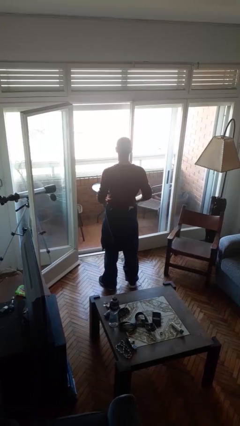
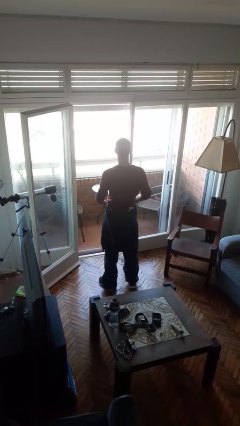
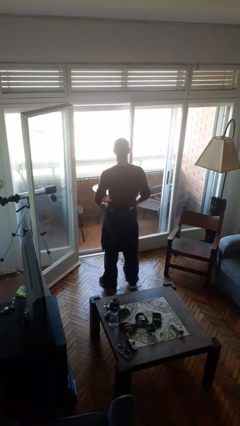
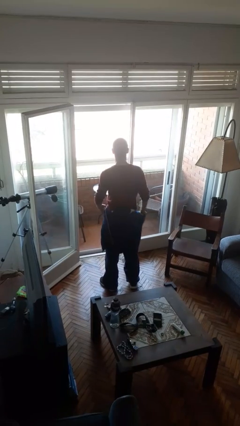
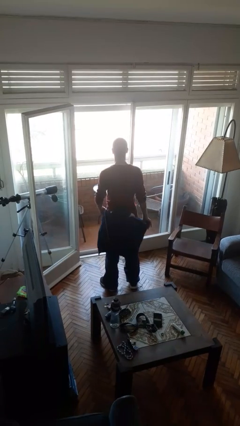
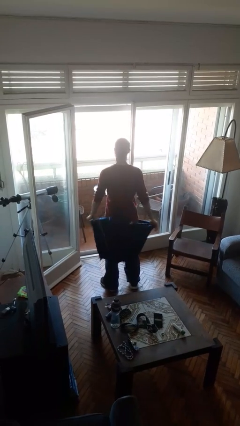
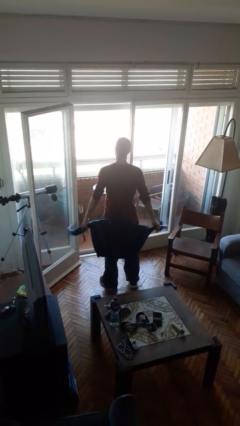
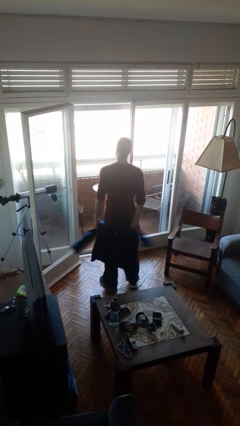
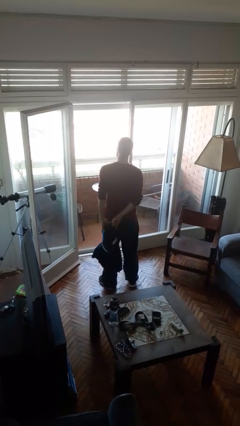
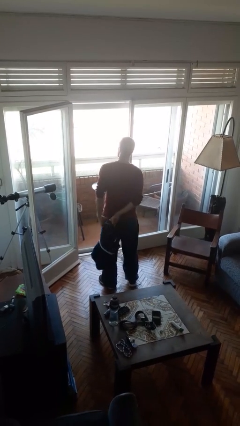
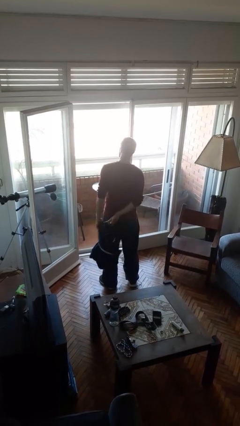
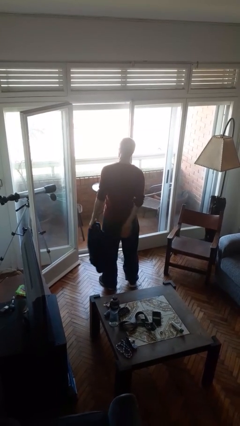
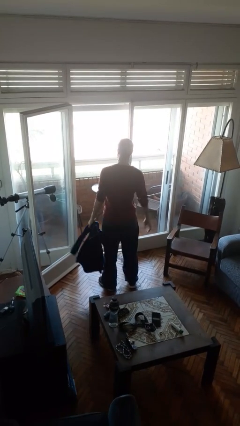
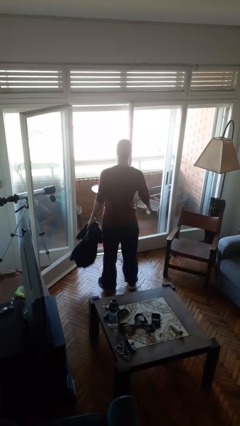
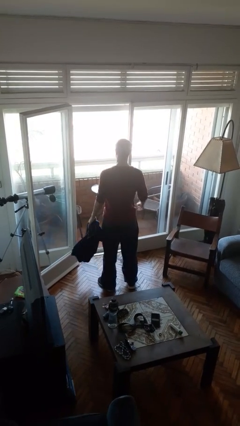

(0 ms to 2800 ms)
person unties jacket around waist

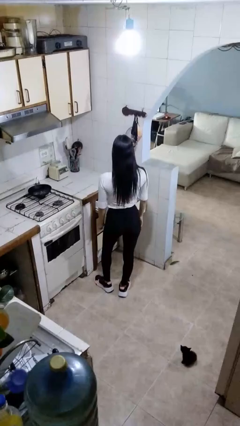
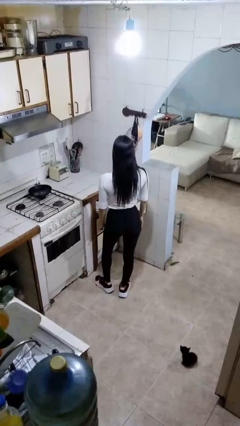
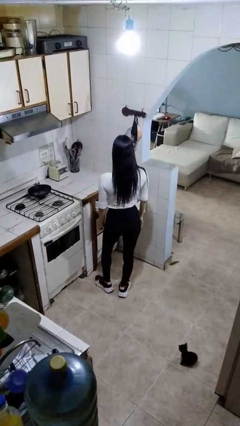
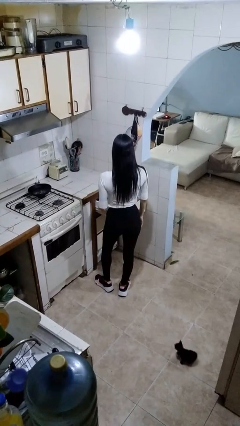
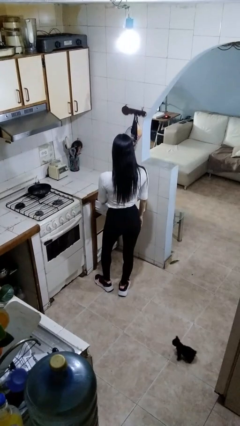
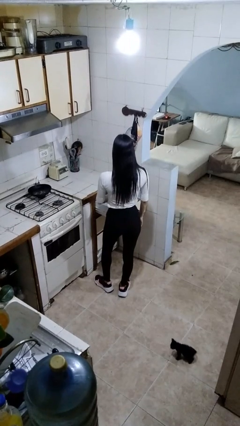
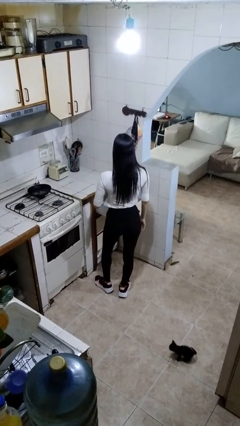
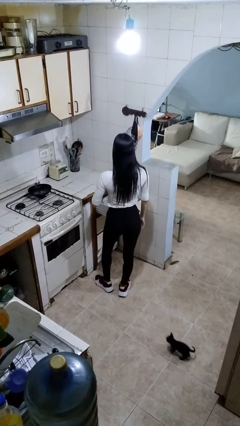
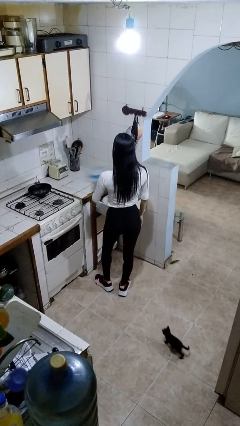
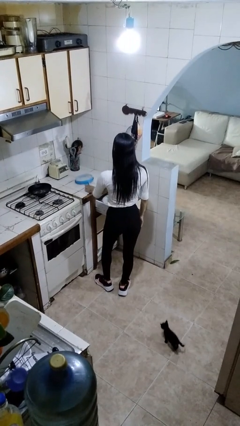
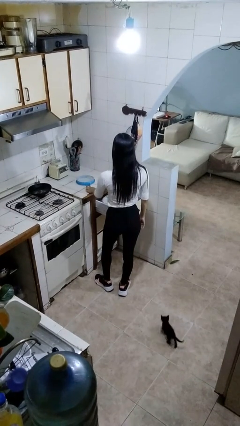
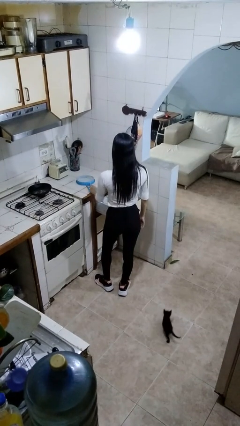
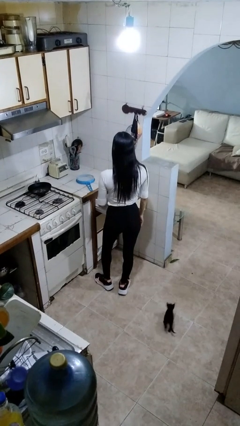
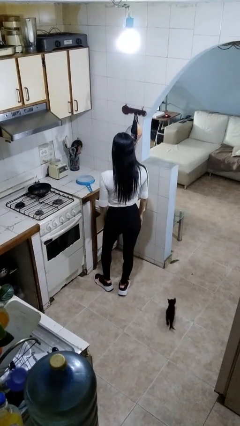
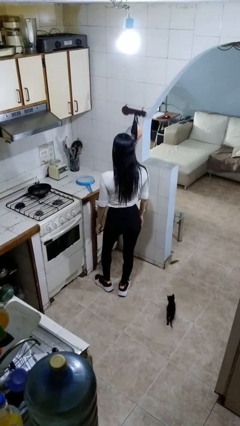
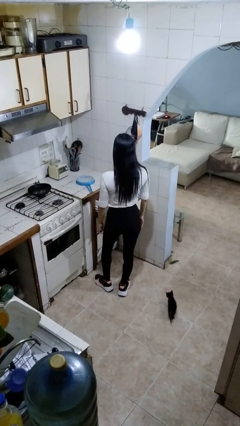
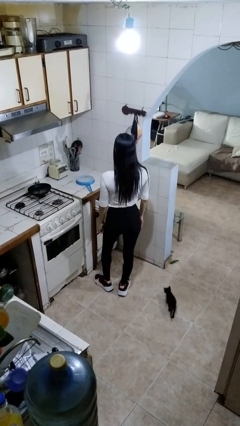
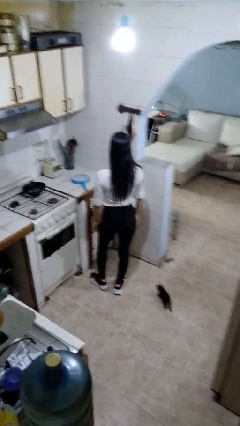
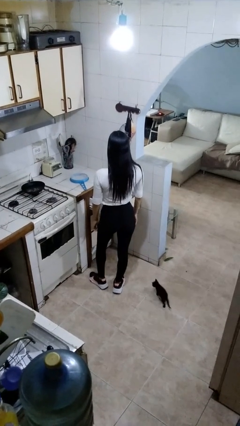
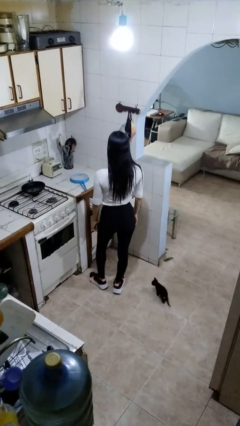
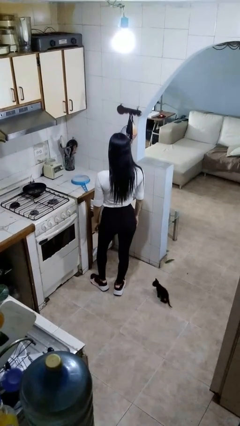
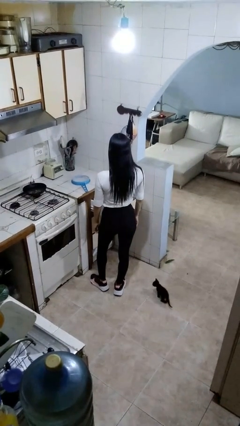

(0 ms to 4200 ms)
person takes object from kitchen drawer

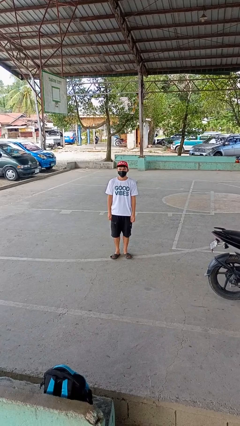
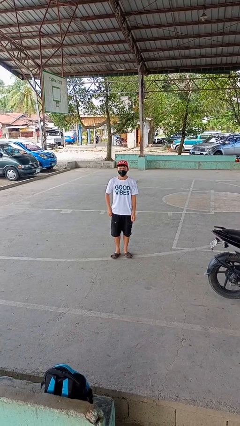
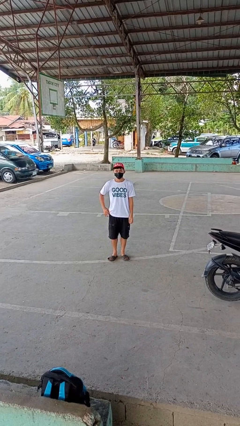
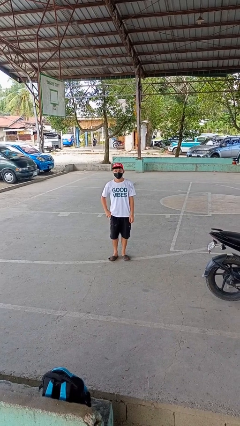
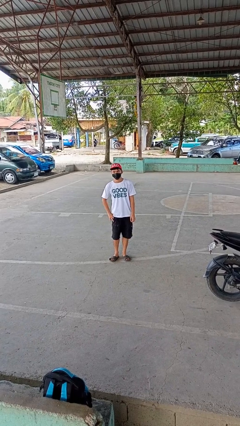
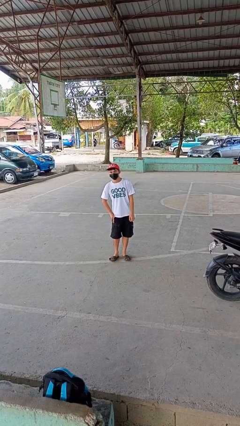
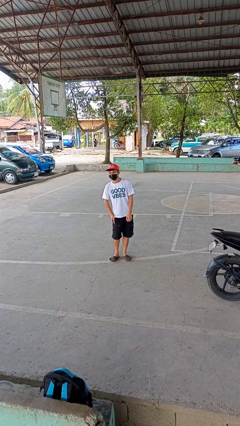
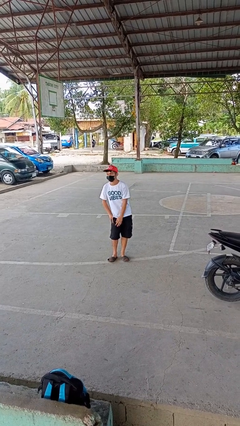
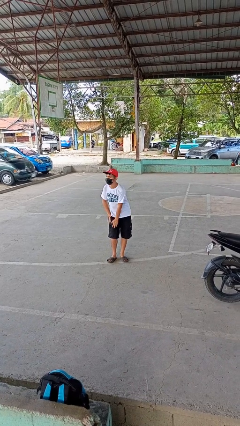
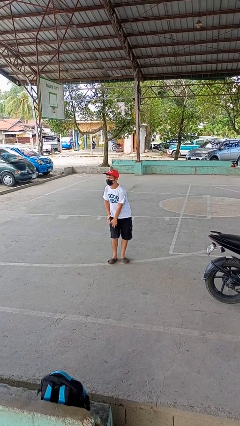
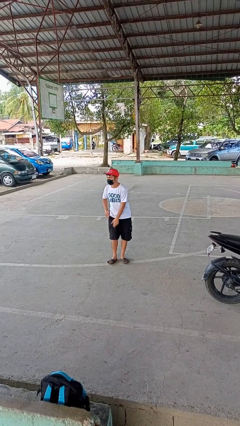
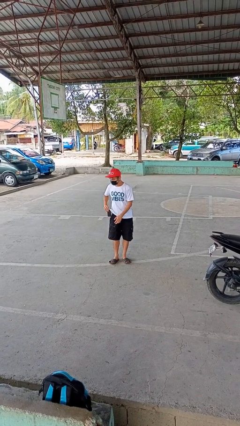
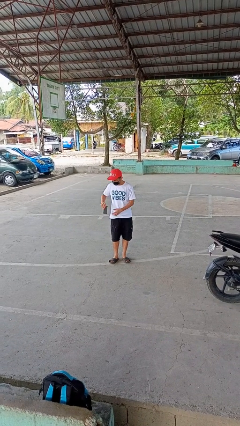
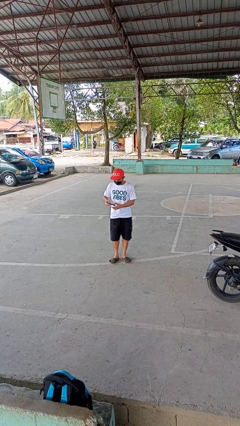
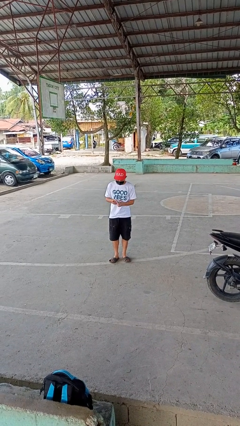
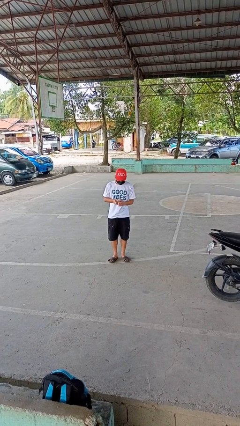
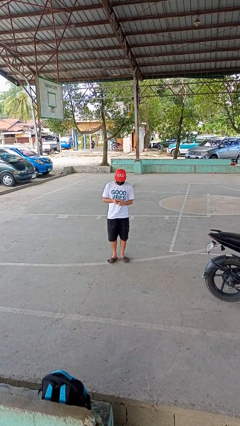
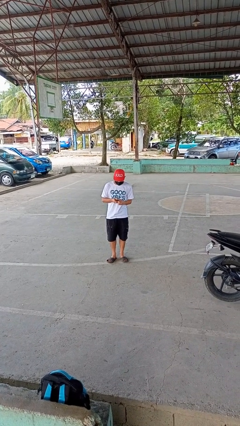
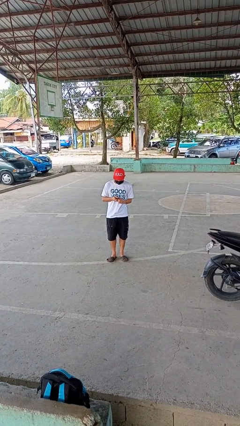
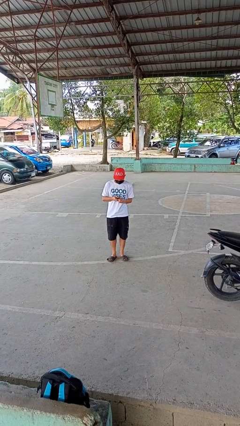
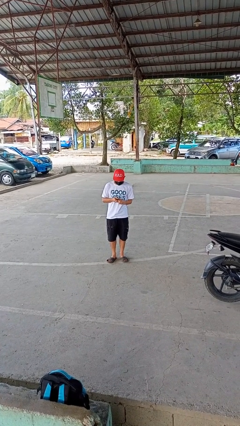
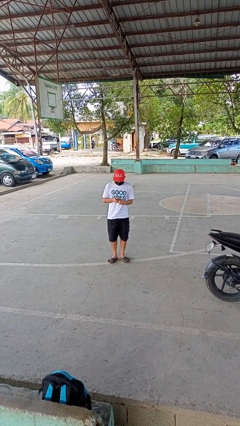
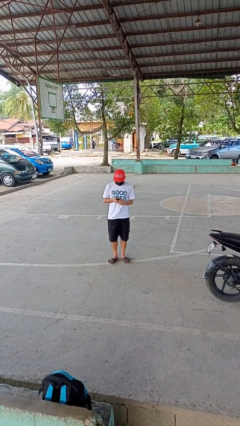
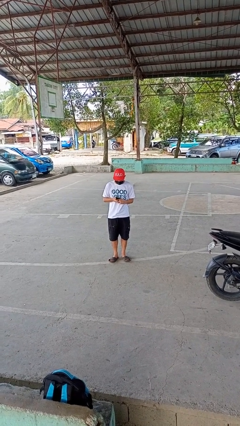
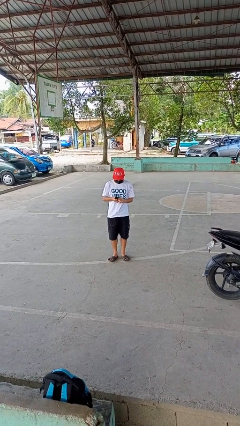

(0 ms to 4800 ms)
person takes phone from pocket

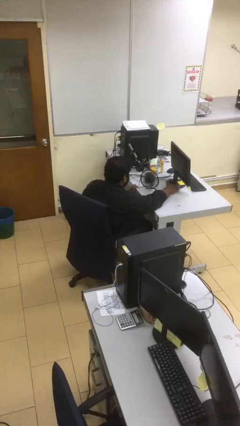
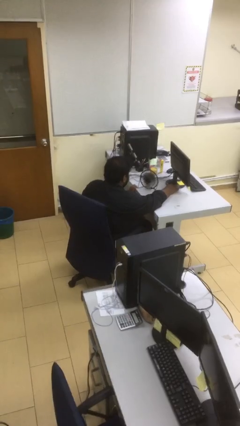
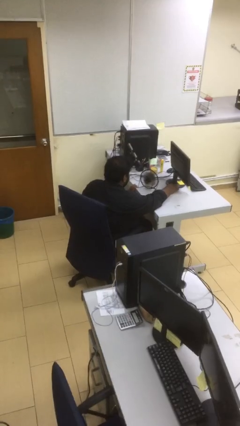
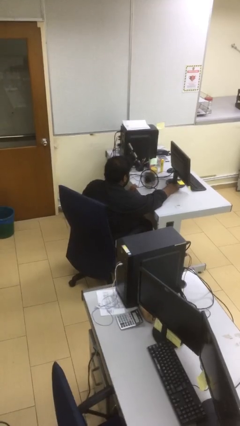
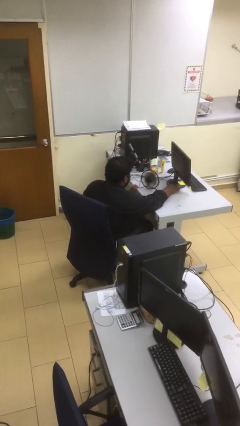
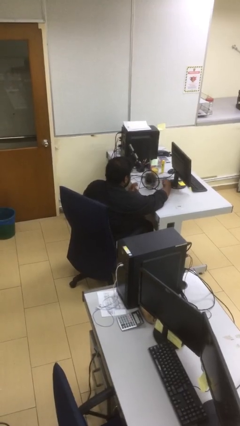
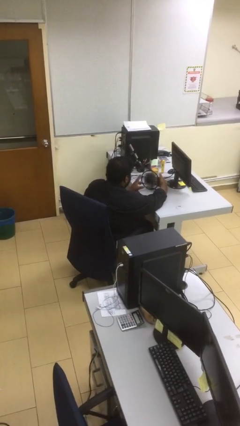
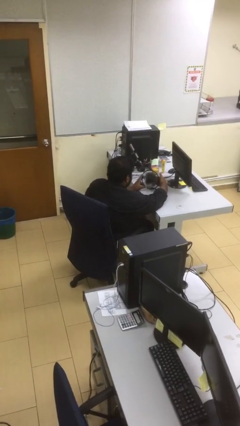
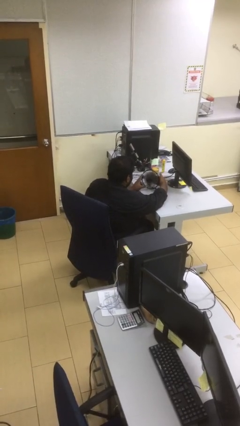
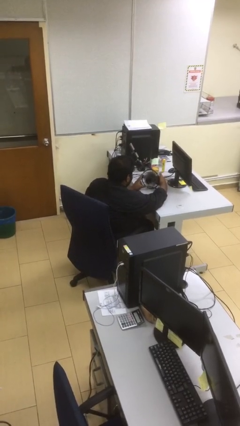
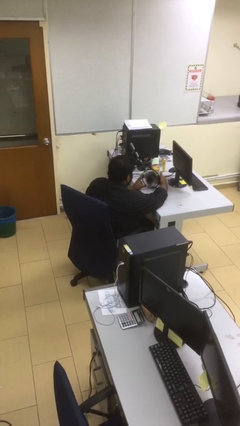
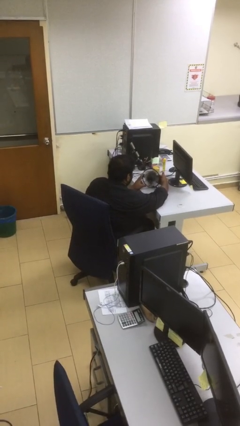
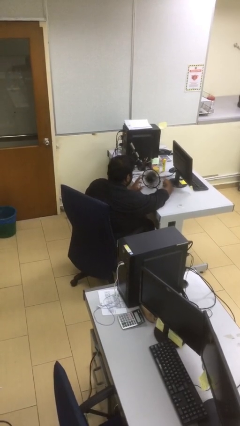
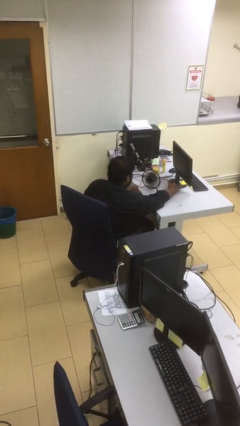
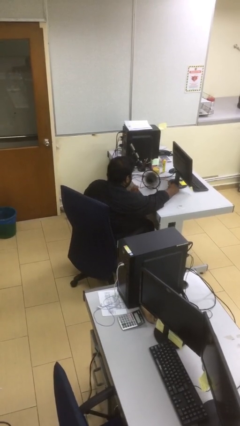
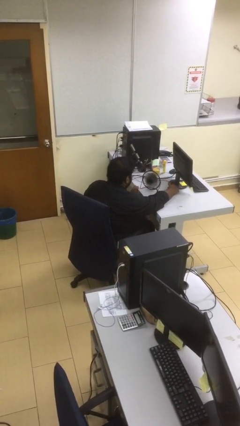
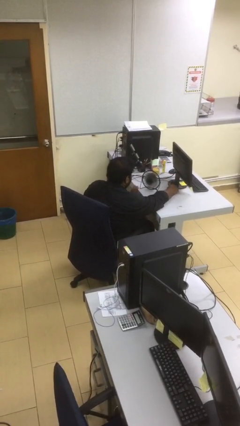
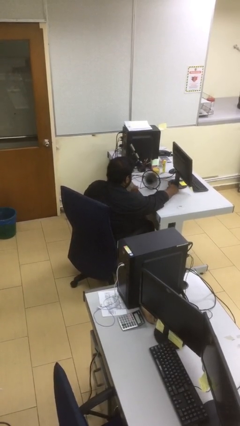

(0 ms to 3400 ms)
person turns on fan

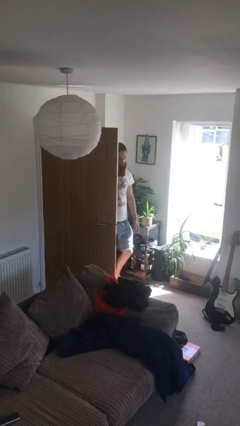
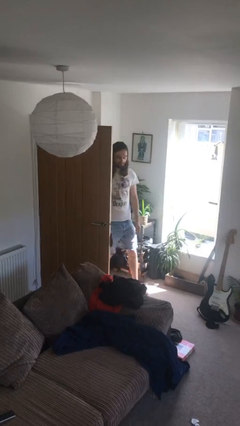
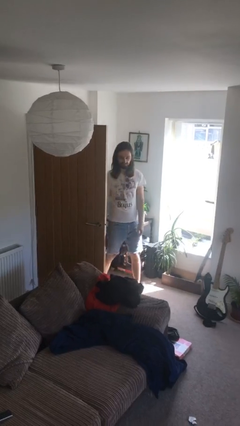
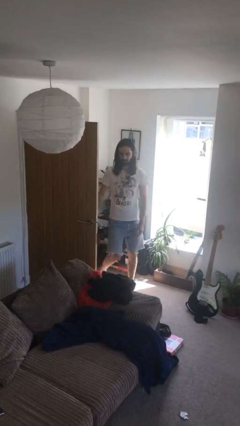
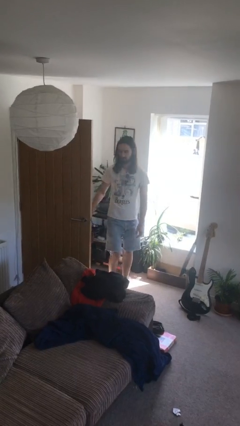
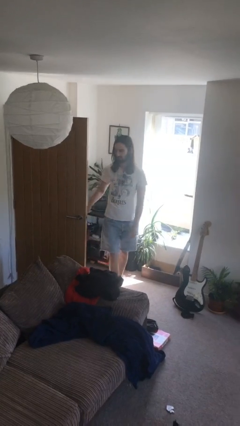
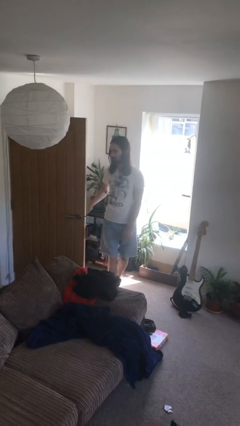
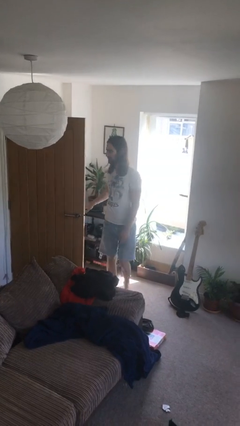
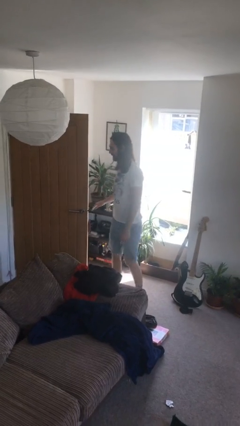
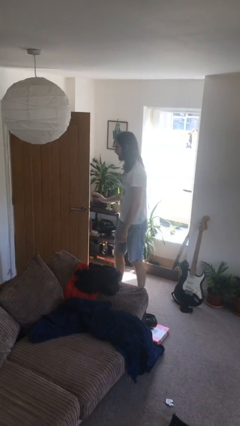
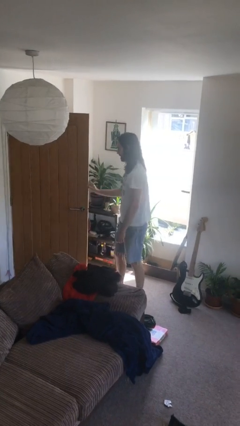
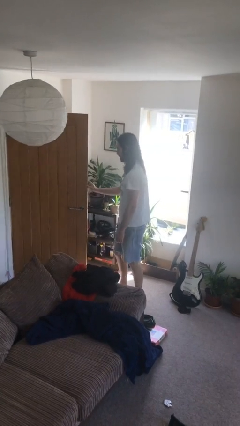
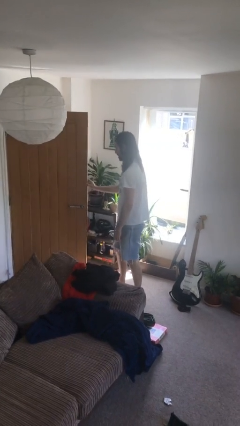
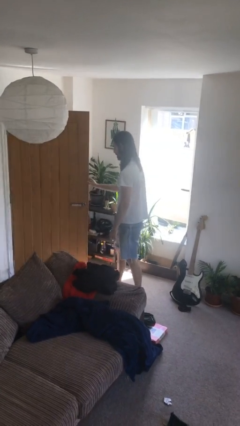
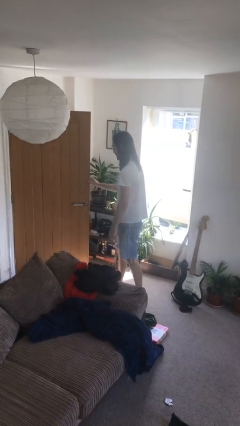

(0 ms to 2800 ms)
person enters scene through structure
